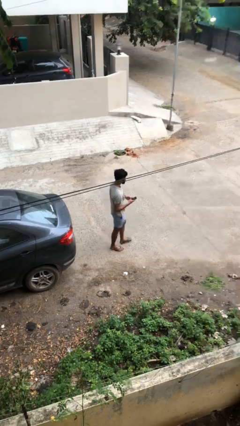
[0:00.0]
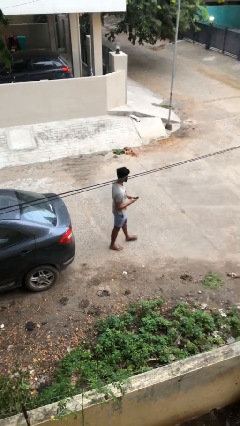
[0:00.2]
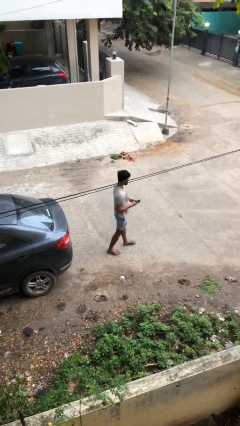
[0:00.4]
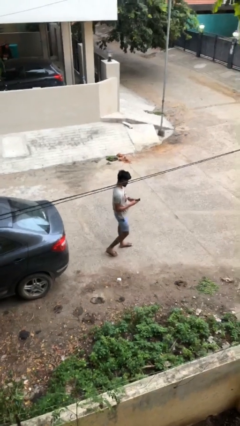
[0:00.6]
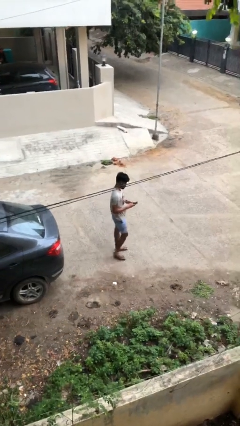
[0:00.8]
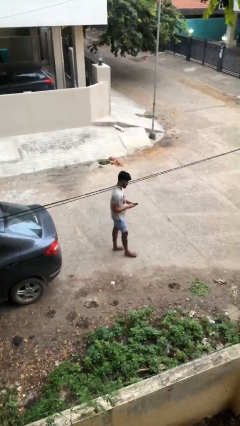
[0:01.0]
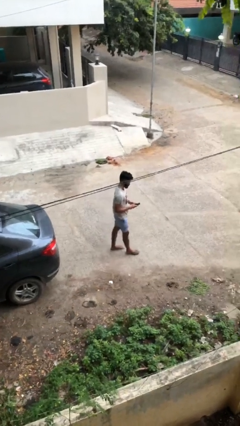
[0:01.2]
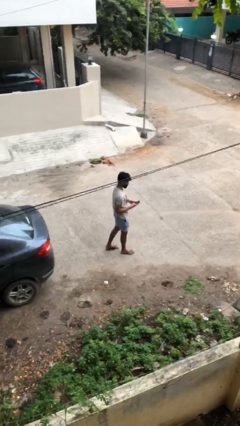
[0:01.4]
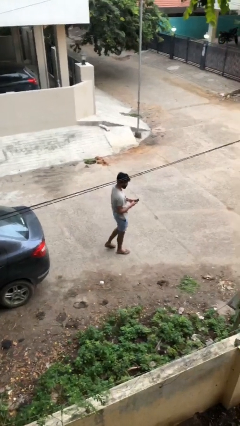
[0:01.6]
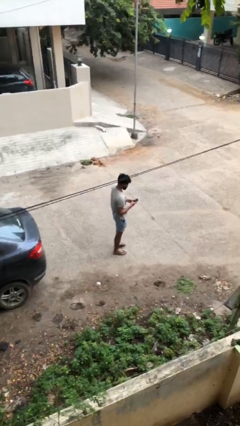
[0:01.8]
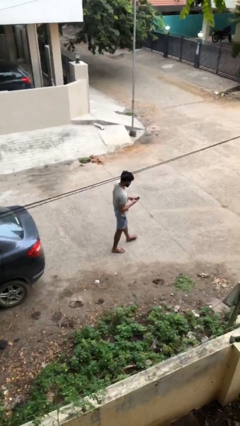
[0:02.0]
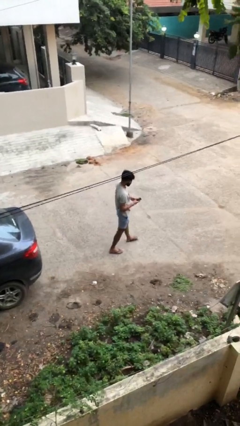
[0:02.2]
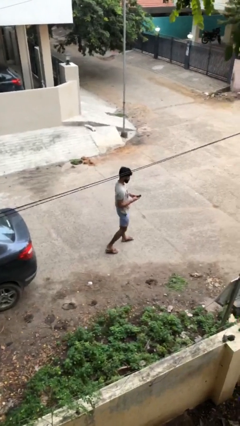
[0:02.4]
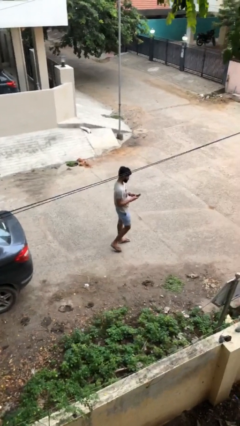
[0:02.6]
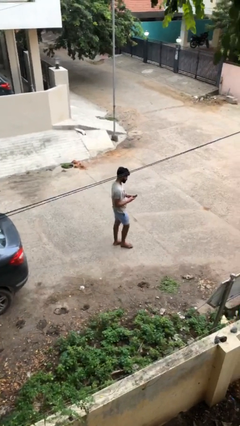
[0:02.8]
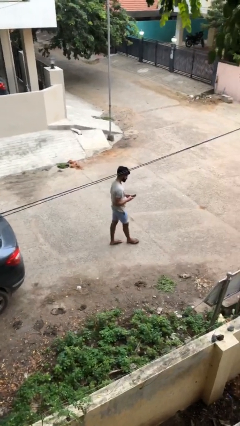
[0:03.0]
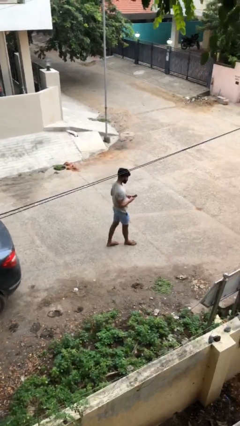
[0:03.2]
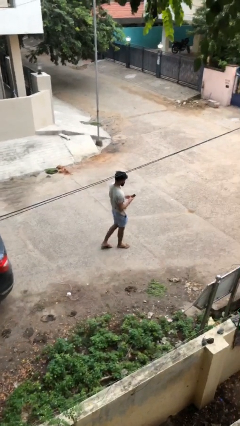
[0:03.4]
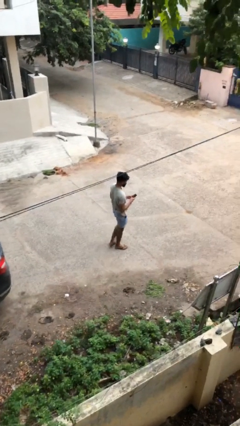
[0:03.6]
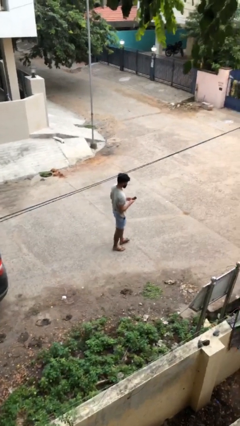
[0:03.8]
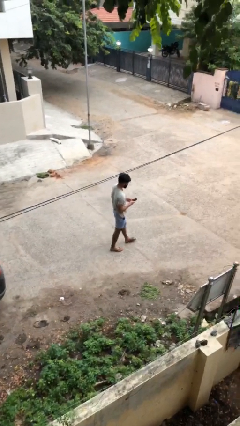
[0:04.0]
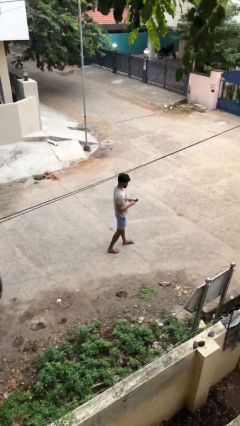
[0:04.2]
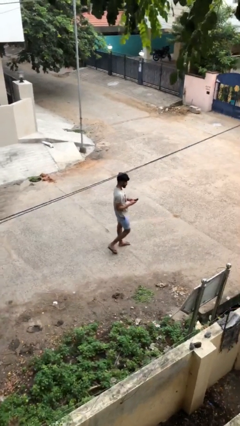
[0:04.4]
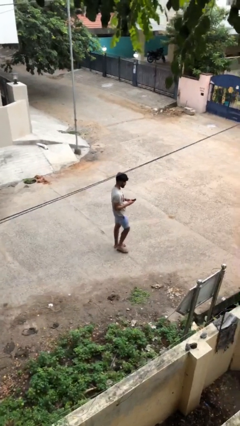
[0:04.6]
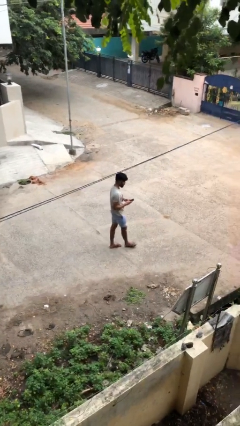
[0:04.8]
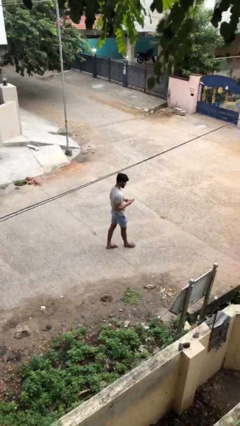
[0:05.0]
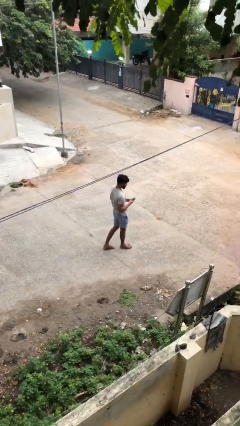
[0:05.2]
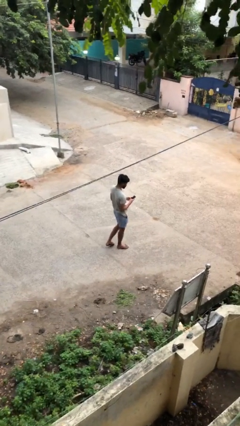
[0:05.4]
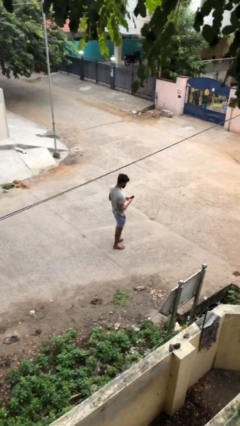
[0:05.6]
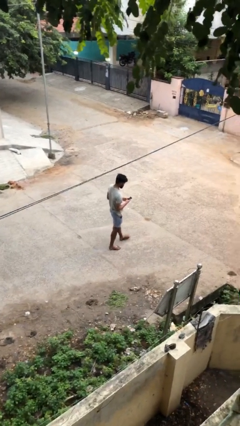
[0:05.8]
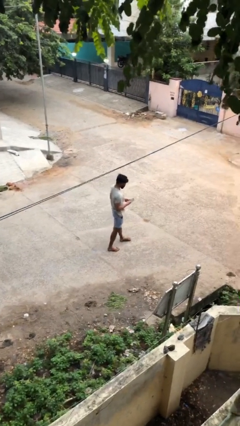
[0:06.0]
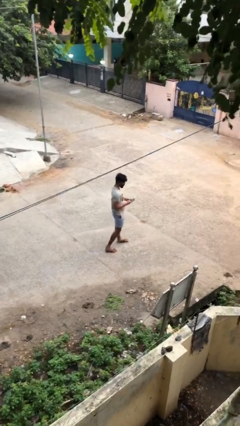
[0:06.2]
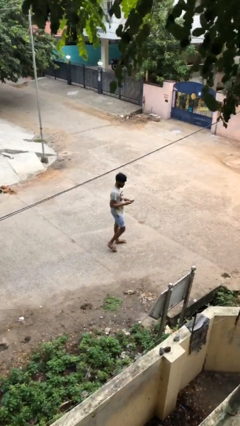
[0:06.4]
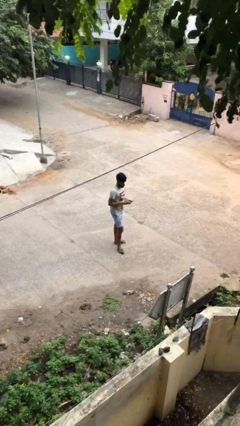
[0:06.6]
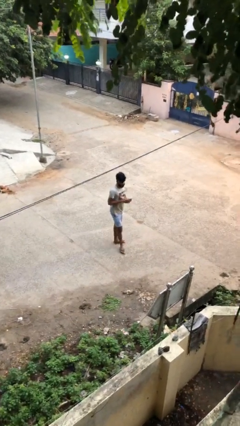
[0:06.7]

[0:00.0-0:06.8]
person texts on phone

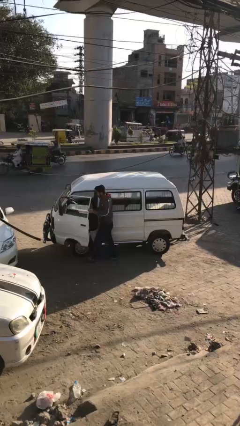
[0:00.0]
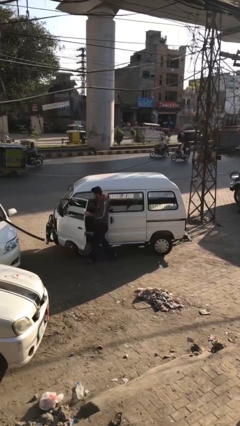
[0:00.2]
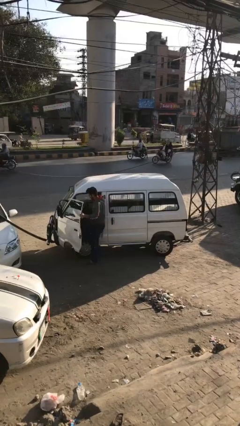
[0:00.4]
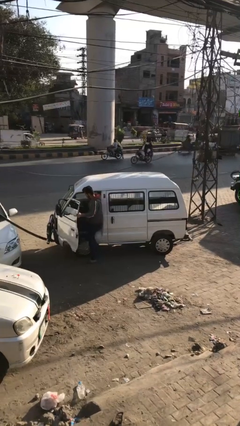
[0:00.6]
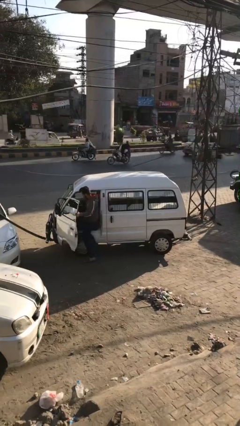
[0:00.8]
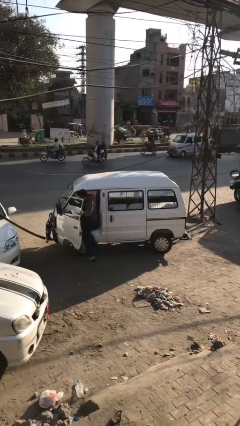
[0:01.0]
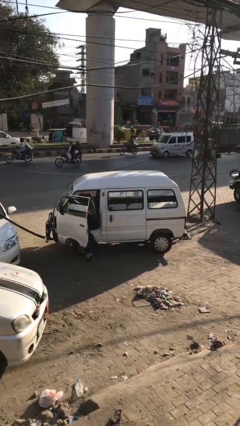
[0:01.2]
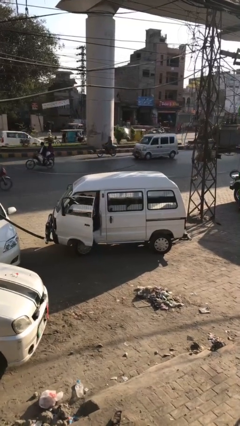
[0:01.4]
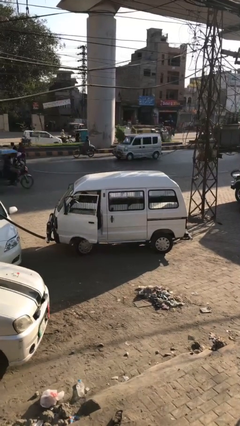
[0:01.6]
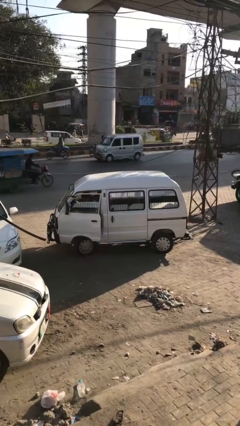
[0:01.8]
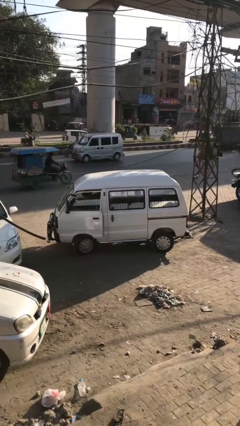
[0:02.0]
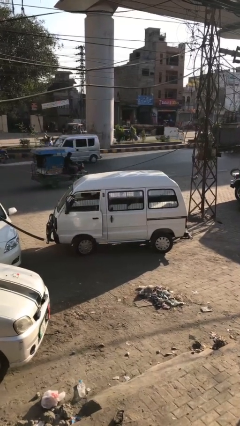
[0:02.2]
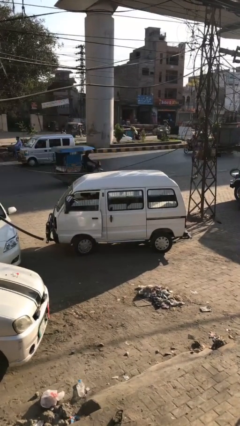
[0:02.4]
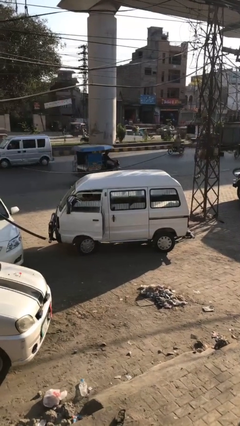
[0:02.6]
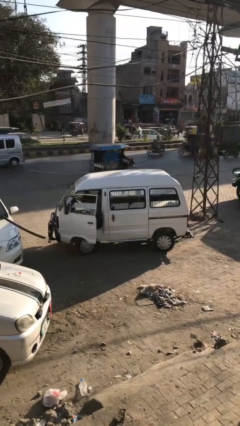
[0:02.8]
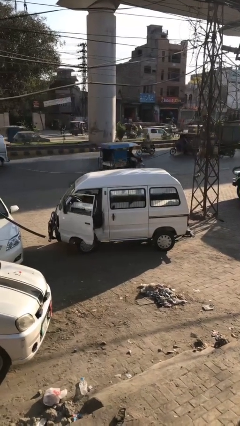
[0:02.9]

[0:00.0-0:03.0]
car picks up person

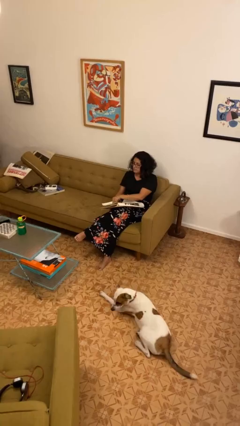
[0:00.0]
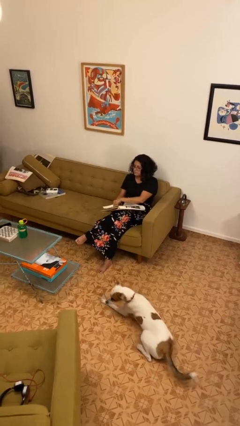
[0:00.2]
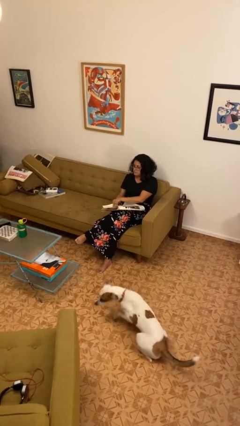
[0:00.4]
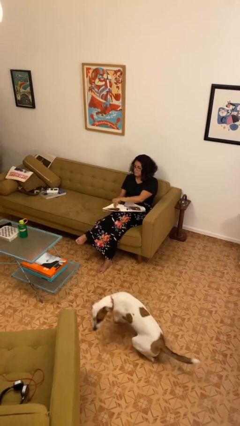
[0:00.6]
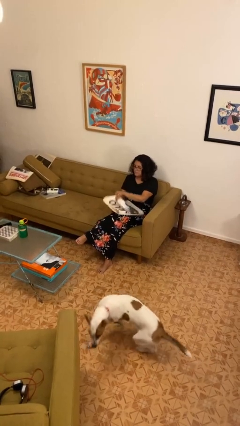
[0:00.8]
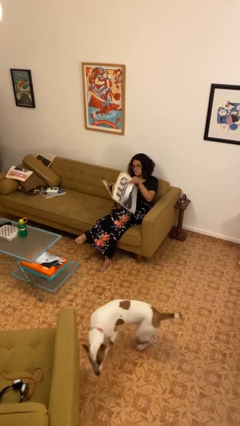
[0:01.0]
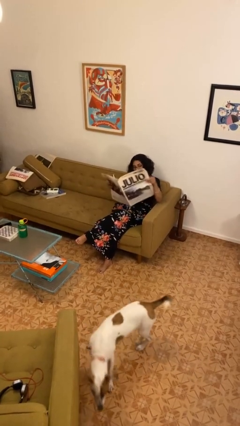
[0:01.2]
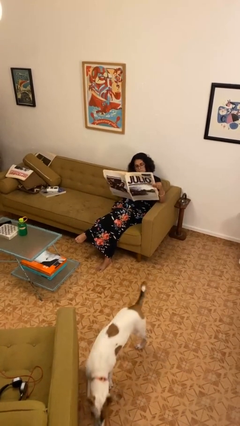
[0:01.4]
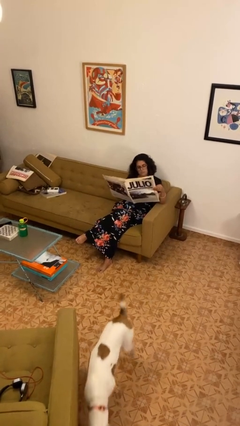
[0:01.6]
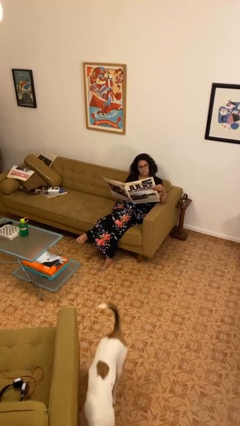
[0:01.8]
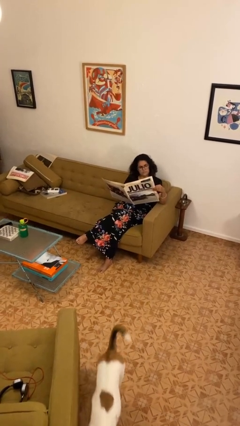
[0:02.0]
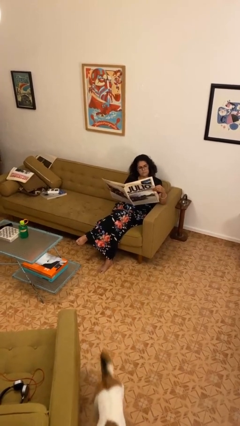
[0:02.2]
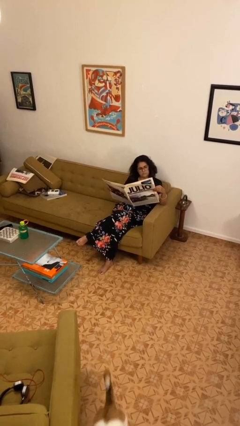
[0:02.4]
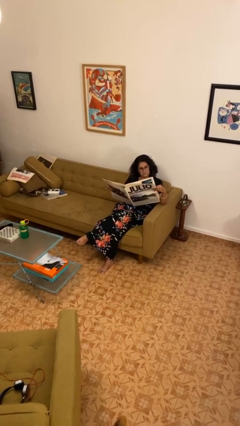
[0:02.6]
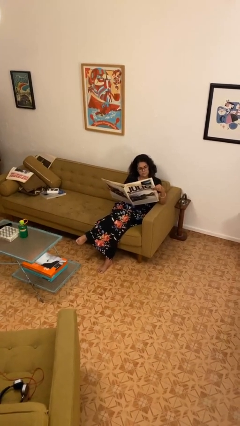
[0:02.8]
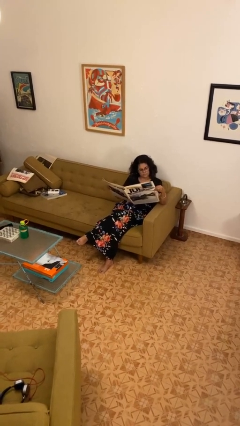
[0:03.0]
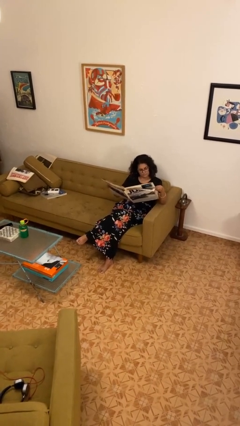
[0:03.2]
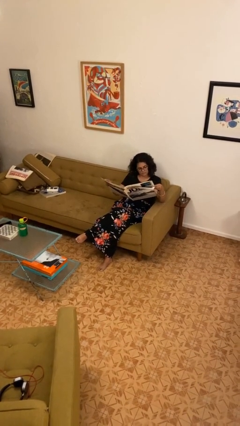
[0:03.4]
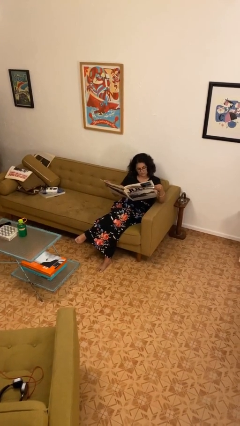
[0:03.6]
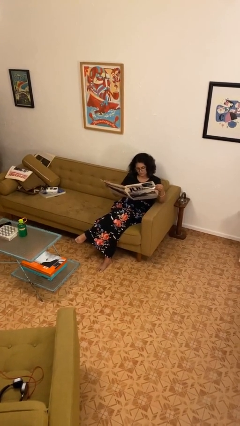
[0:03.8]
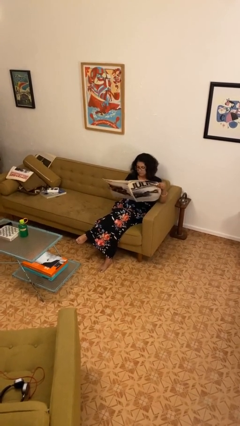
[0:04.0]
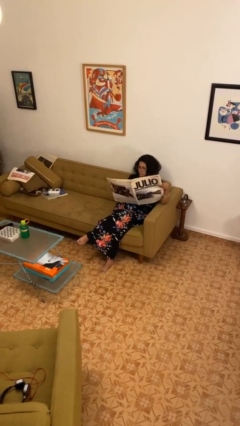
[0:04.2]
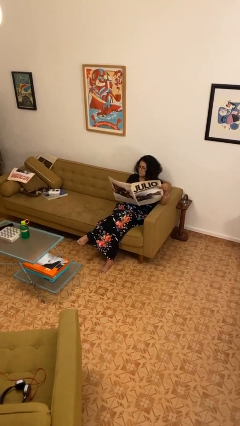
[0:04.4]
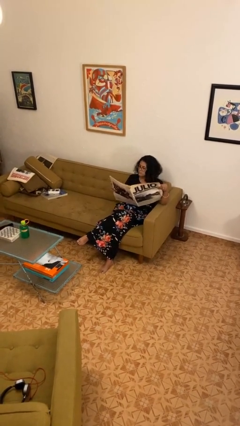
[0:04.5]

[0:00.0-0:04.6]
person reads newspaper

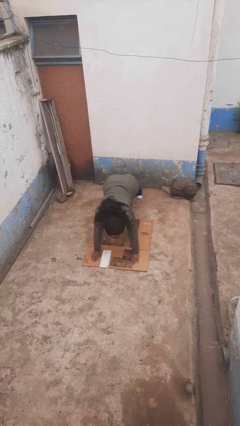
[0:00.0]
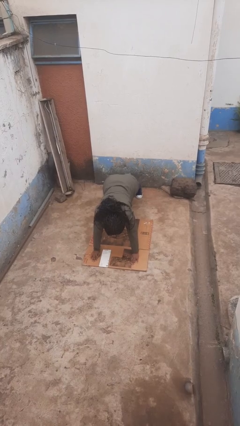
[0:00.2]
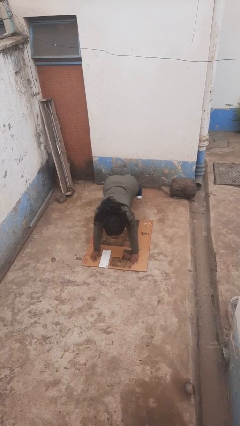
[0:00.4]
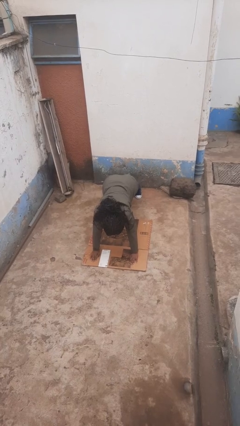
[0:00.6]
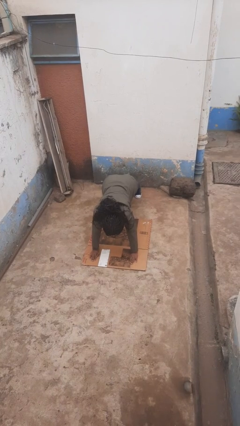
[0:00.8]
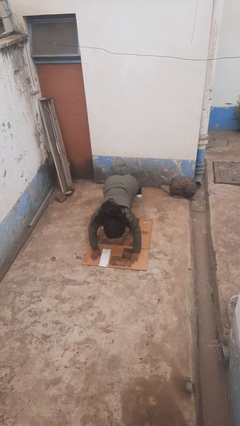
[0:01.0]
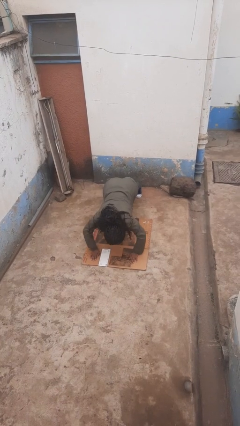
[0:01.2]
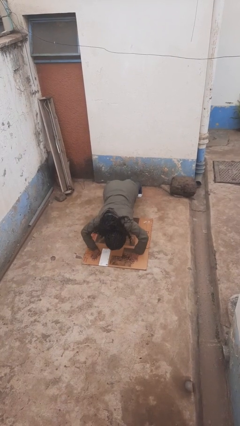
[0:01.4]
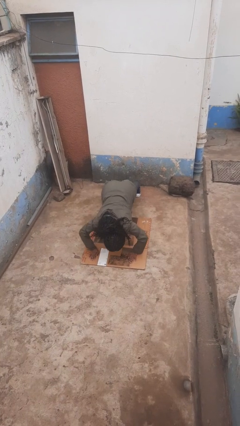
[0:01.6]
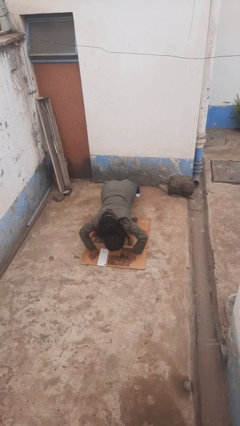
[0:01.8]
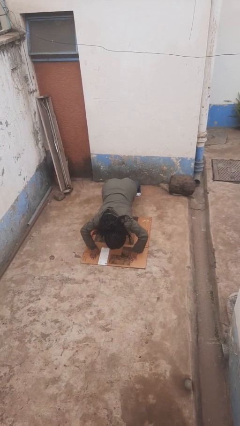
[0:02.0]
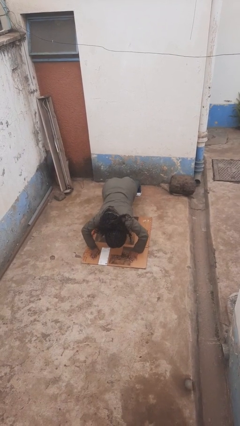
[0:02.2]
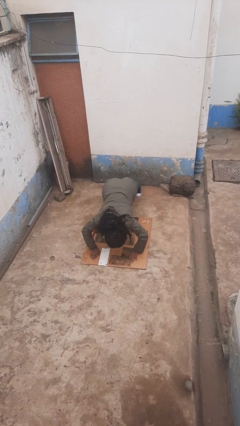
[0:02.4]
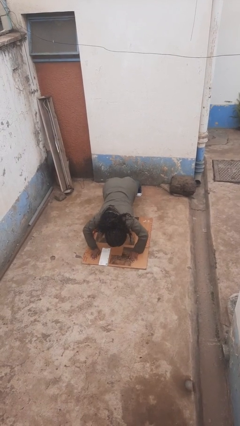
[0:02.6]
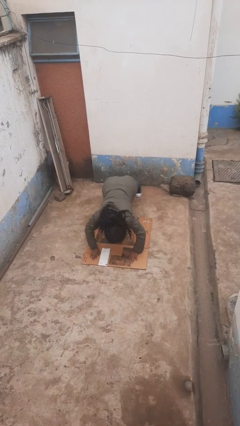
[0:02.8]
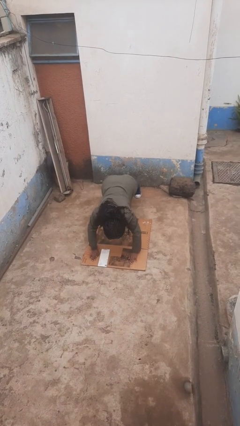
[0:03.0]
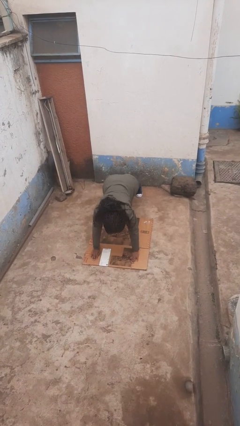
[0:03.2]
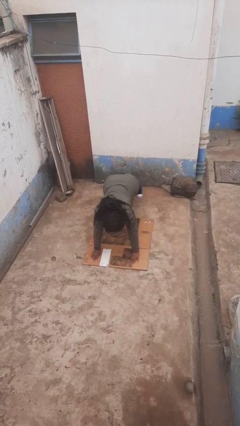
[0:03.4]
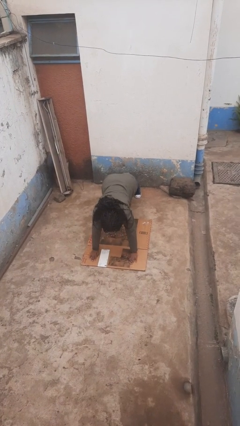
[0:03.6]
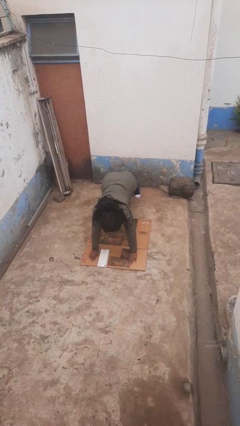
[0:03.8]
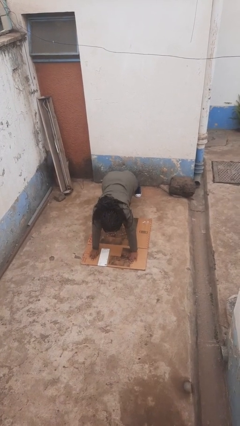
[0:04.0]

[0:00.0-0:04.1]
person exercises with pushup
